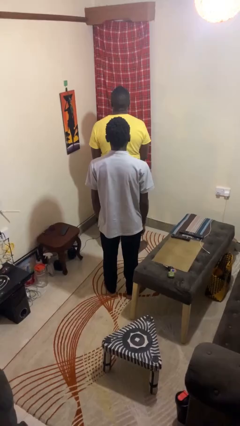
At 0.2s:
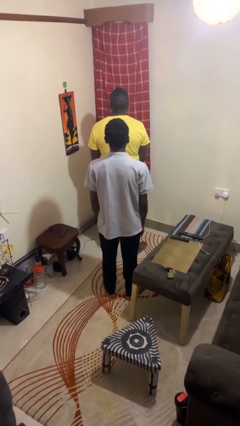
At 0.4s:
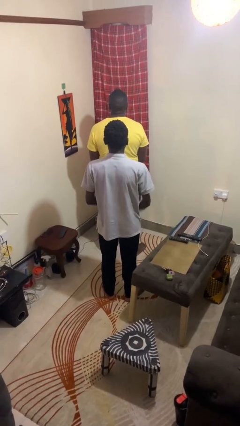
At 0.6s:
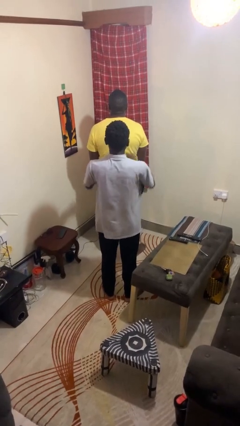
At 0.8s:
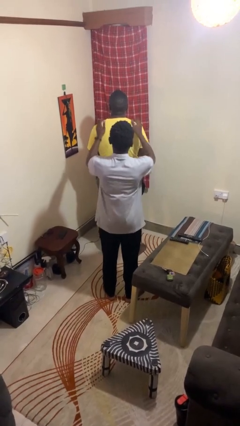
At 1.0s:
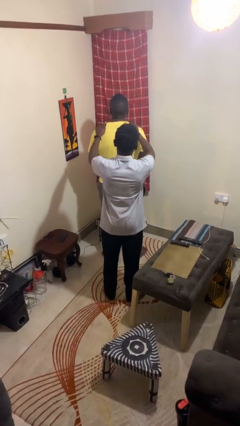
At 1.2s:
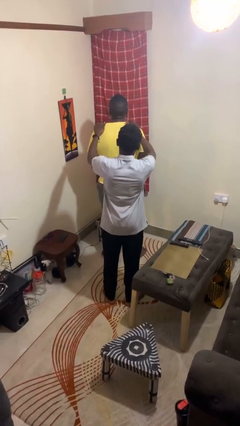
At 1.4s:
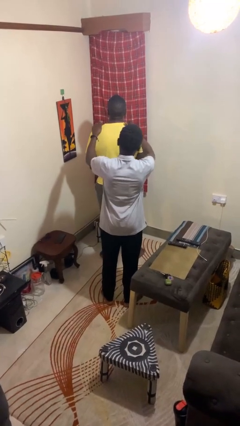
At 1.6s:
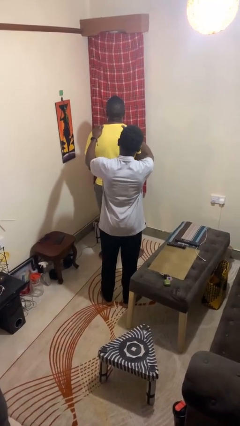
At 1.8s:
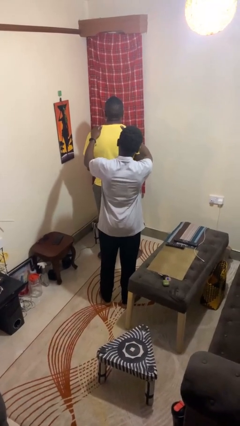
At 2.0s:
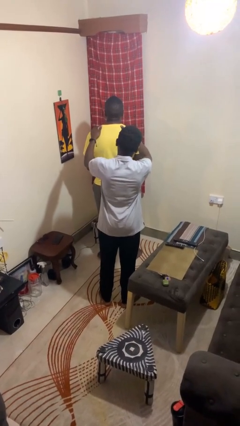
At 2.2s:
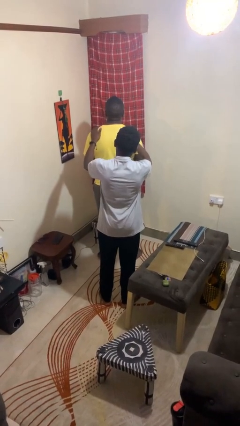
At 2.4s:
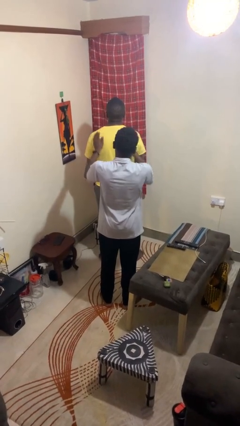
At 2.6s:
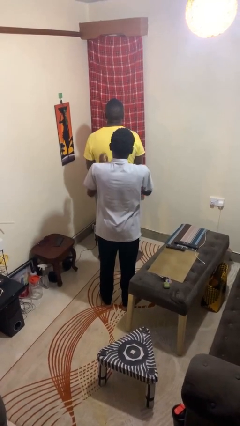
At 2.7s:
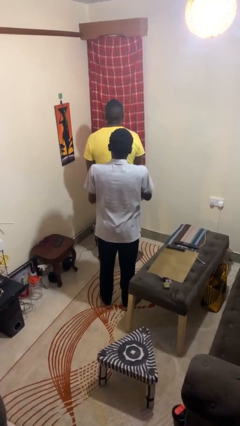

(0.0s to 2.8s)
person touches back of person

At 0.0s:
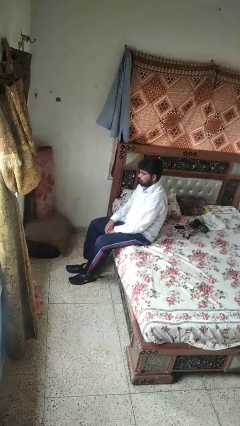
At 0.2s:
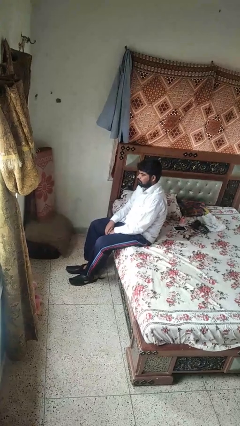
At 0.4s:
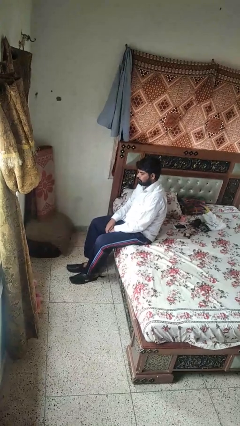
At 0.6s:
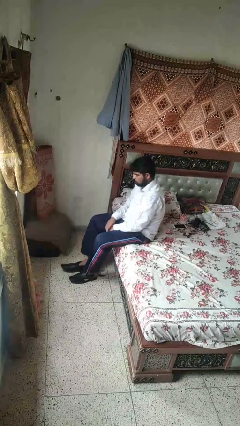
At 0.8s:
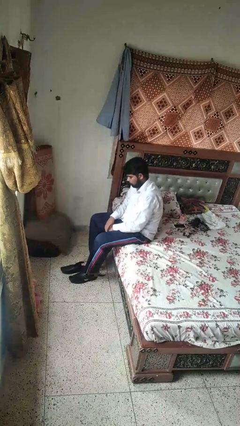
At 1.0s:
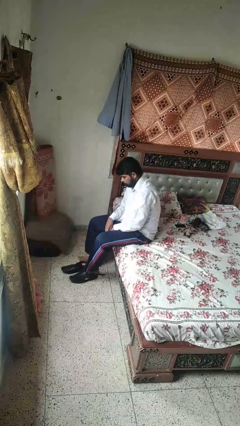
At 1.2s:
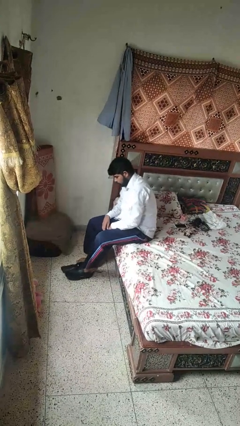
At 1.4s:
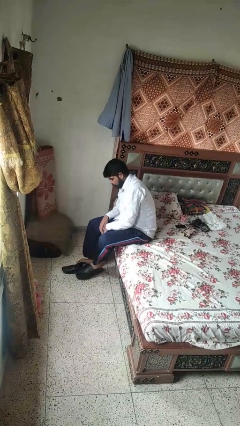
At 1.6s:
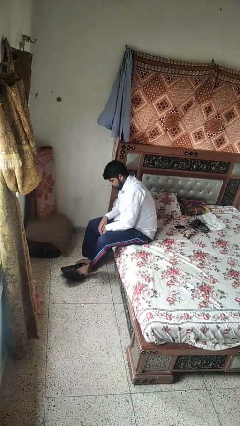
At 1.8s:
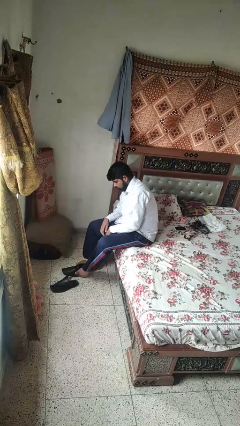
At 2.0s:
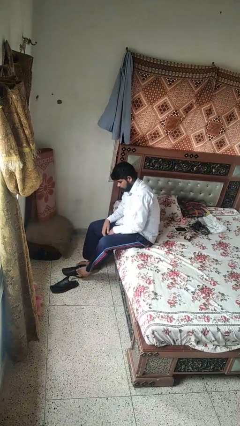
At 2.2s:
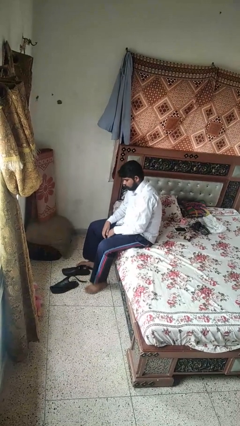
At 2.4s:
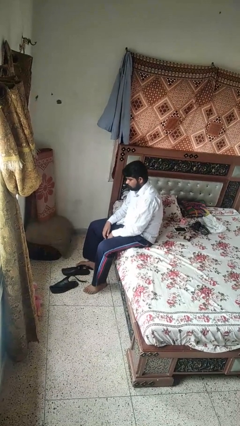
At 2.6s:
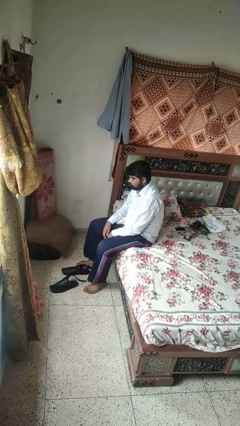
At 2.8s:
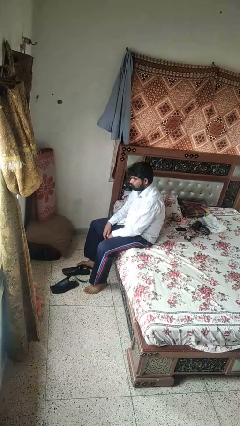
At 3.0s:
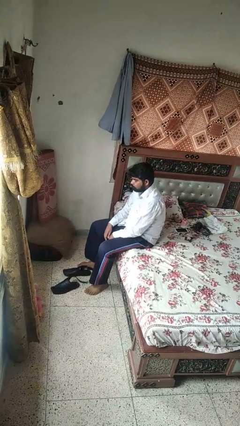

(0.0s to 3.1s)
person takes off shoes

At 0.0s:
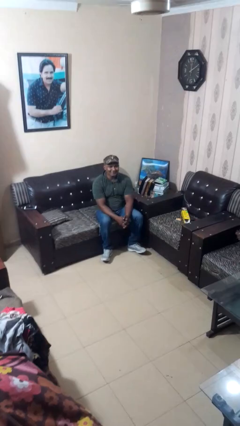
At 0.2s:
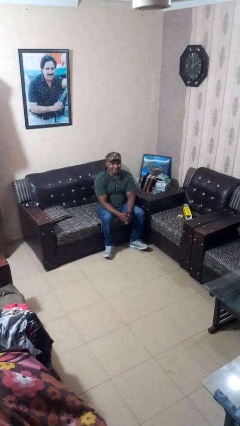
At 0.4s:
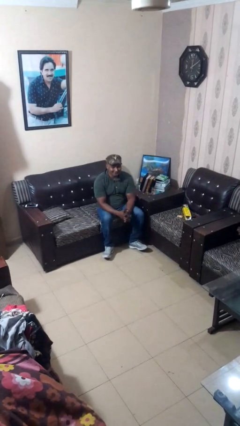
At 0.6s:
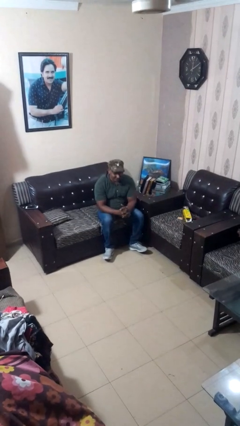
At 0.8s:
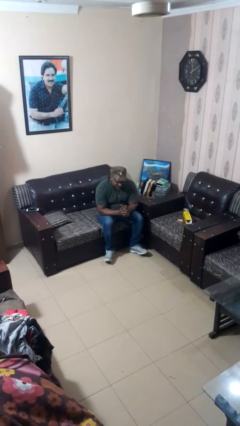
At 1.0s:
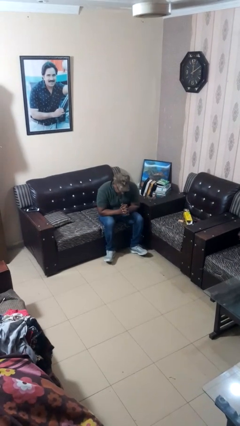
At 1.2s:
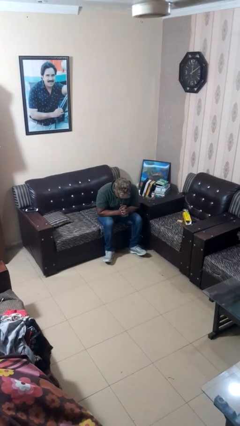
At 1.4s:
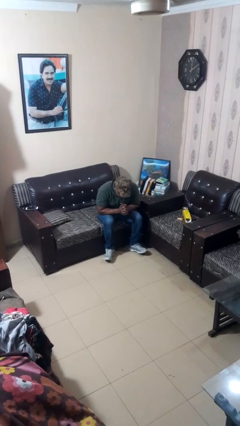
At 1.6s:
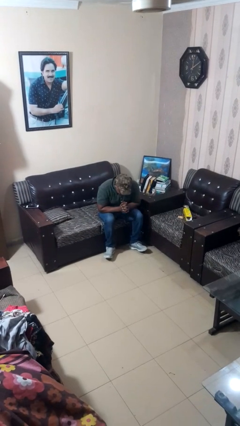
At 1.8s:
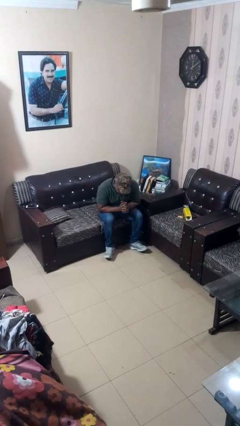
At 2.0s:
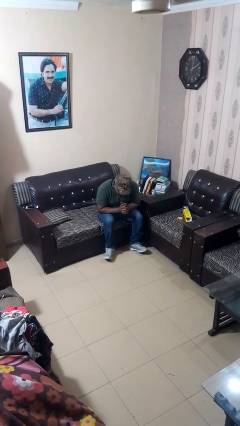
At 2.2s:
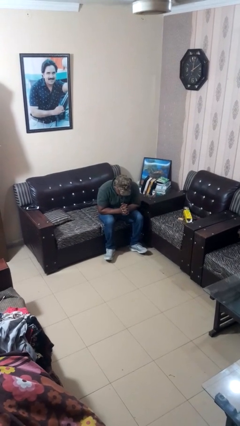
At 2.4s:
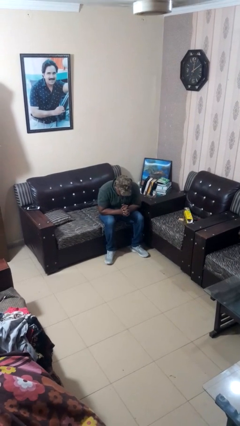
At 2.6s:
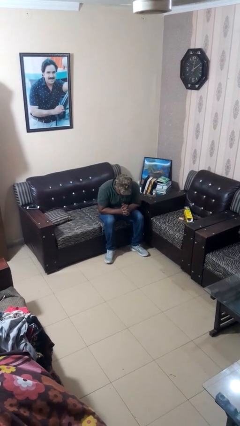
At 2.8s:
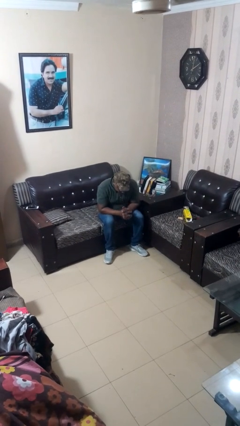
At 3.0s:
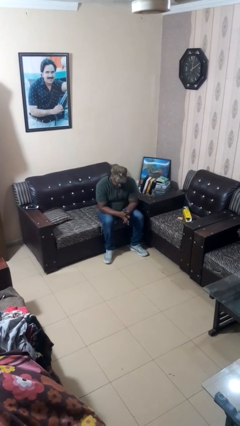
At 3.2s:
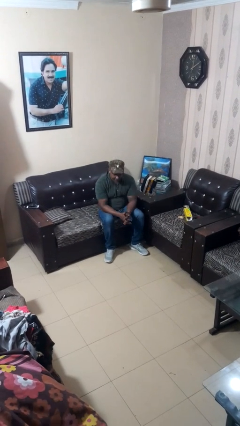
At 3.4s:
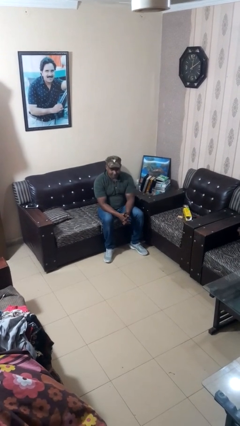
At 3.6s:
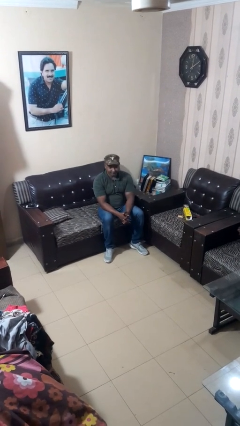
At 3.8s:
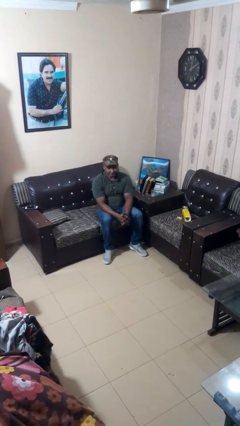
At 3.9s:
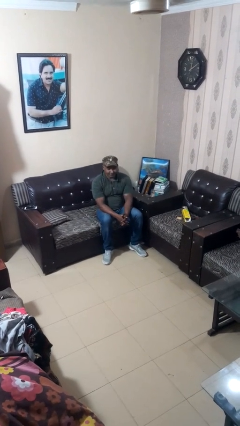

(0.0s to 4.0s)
person prays

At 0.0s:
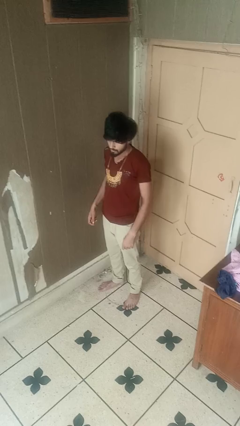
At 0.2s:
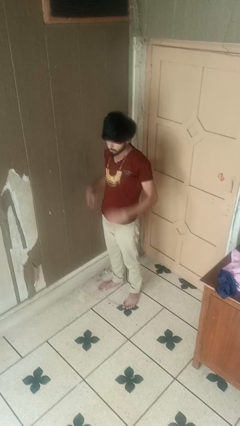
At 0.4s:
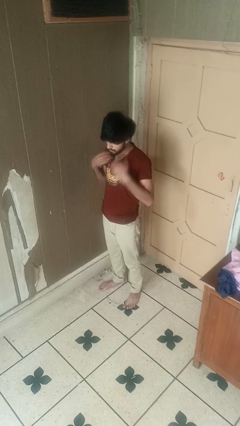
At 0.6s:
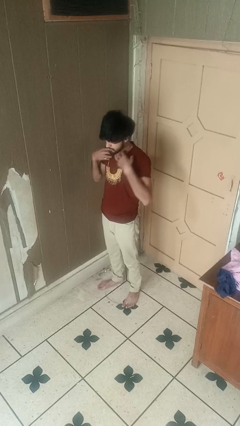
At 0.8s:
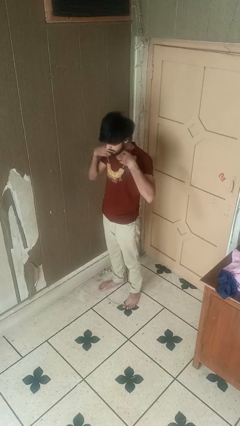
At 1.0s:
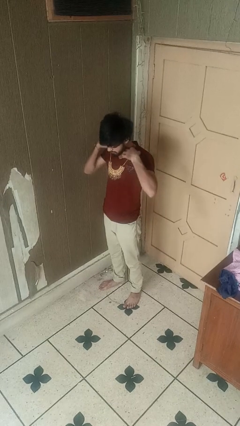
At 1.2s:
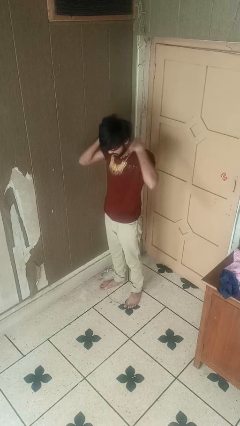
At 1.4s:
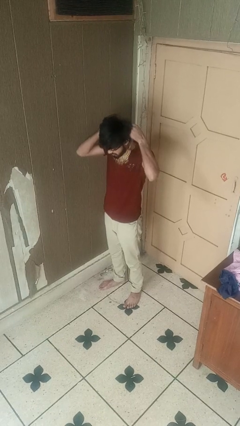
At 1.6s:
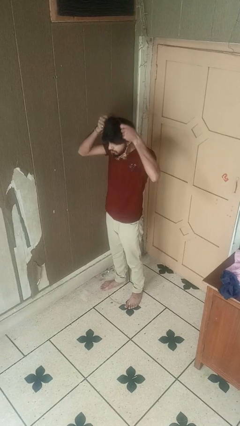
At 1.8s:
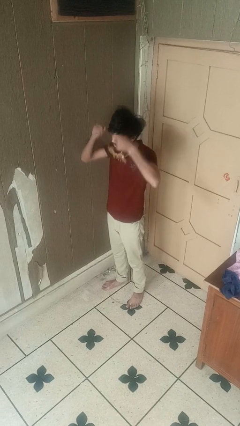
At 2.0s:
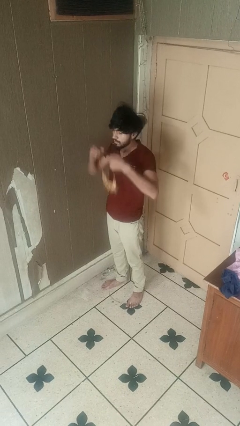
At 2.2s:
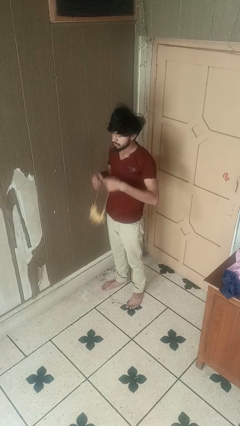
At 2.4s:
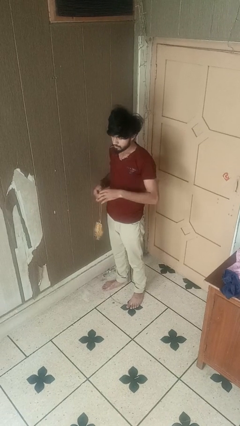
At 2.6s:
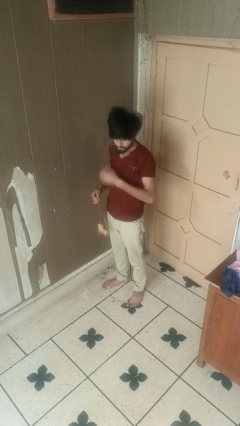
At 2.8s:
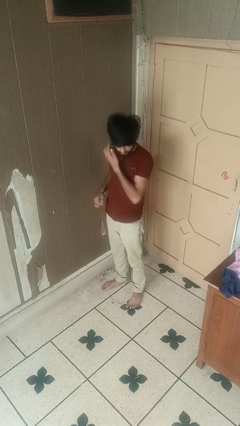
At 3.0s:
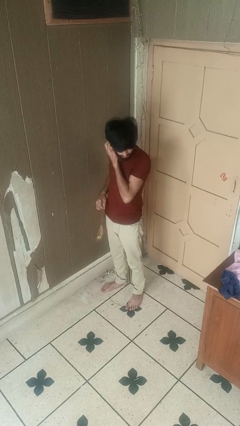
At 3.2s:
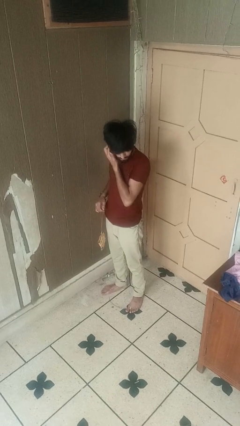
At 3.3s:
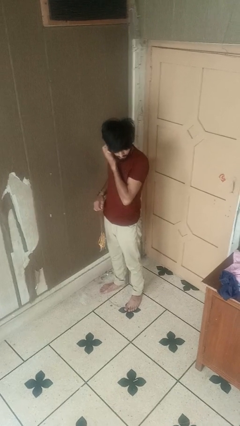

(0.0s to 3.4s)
person takes off necklace

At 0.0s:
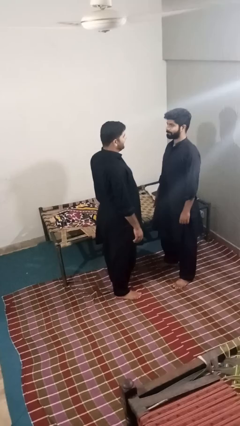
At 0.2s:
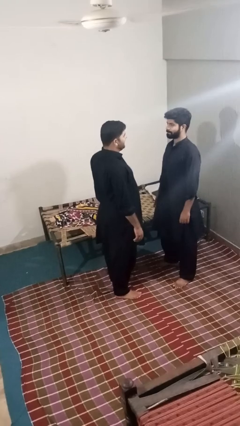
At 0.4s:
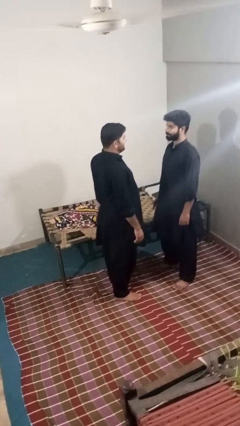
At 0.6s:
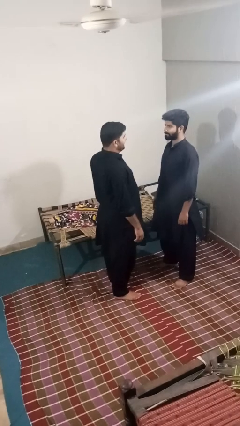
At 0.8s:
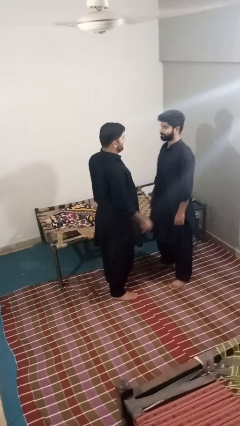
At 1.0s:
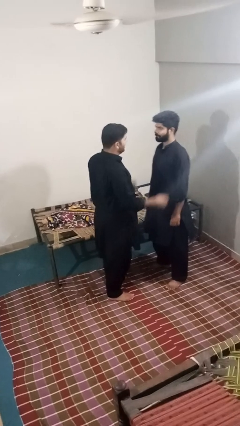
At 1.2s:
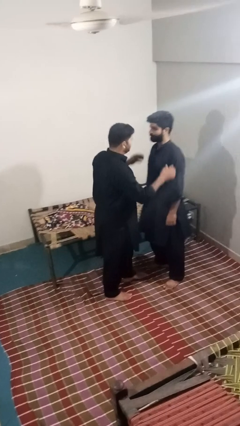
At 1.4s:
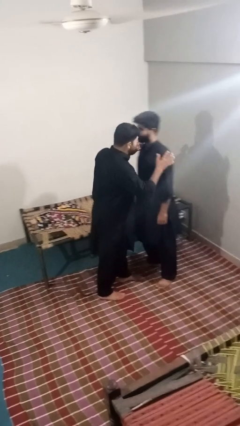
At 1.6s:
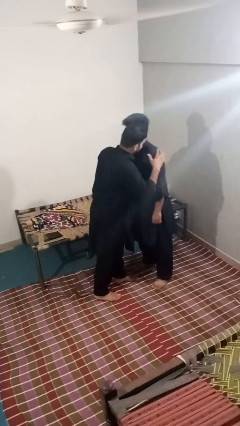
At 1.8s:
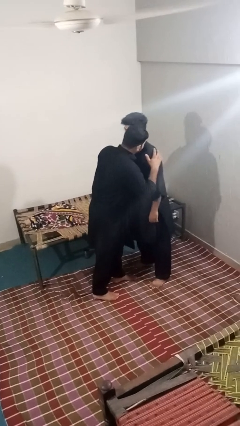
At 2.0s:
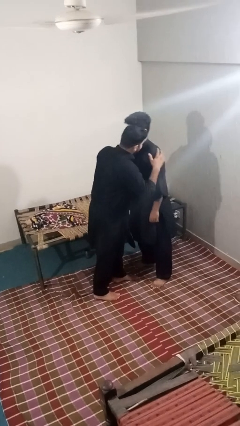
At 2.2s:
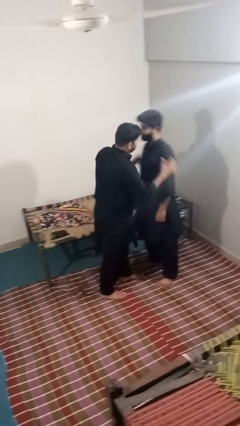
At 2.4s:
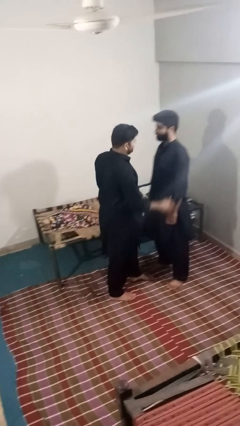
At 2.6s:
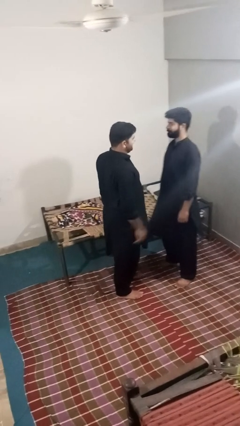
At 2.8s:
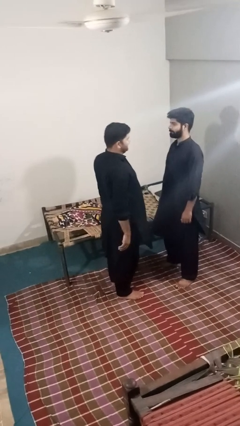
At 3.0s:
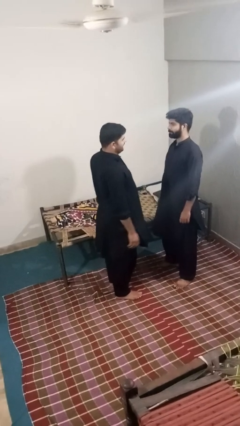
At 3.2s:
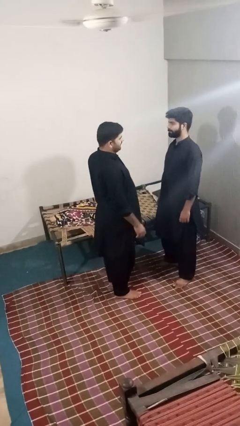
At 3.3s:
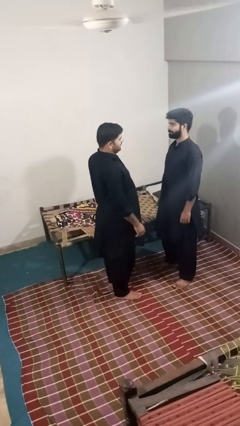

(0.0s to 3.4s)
person kisses cheek of person

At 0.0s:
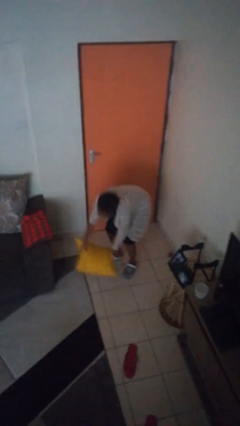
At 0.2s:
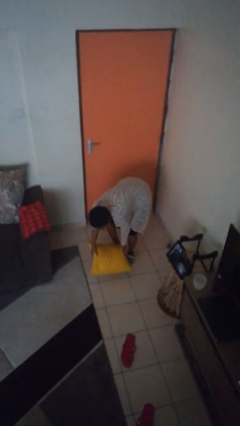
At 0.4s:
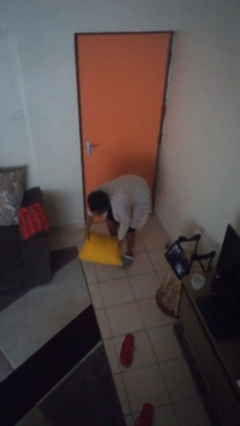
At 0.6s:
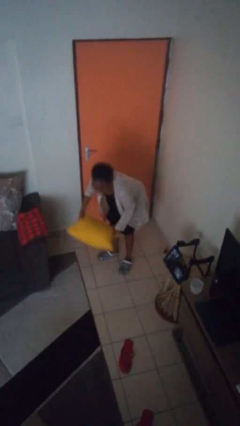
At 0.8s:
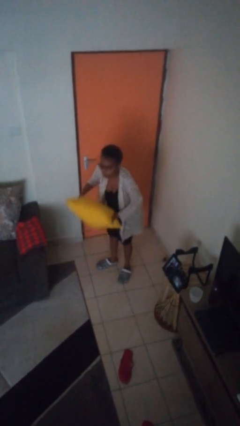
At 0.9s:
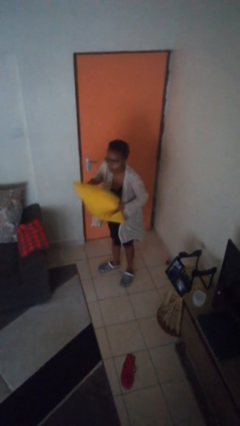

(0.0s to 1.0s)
person catches dropped object

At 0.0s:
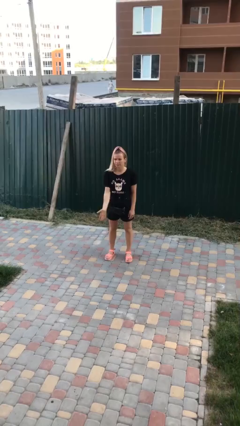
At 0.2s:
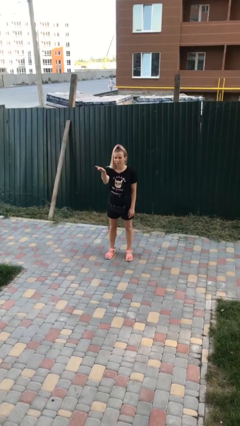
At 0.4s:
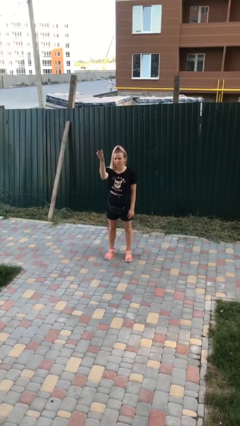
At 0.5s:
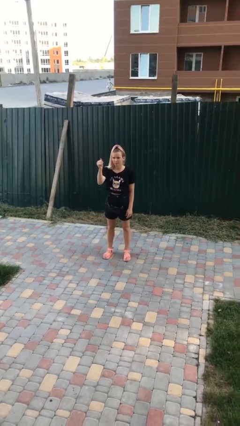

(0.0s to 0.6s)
person gestures swipe up
